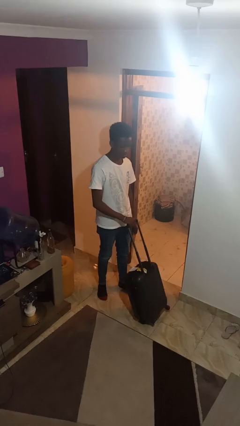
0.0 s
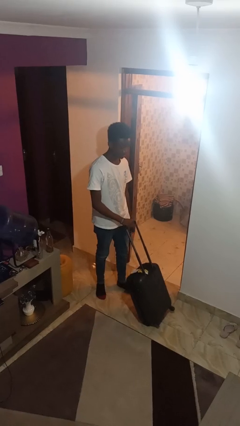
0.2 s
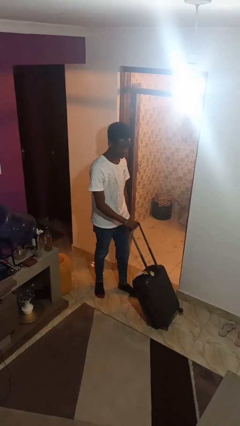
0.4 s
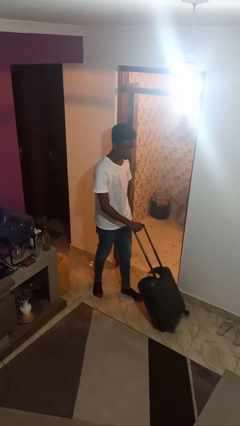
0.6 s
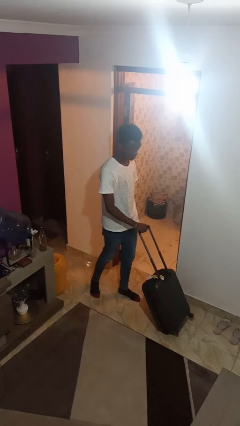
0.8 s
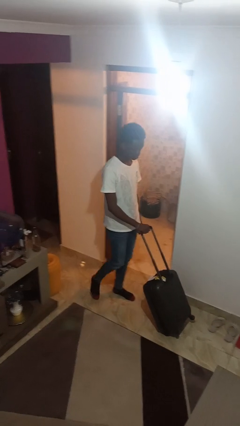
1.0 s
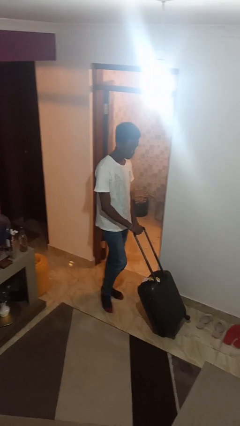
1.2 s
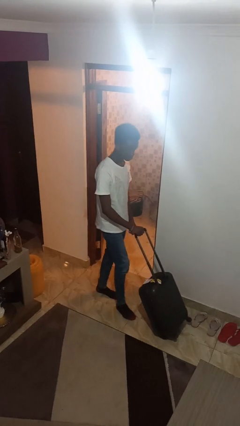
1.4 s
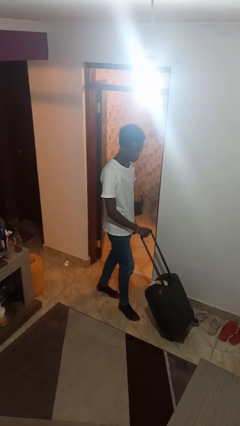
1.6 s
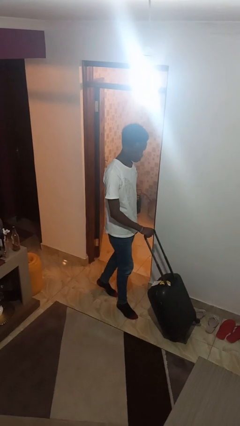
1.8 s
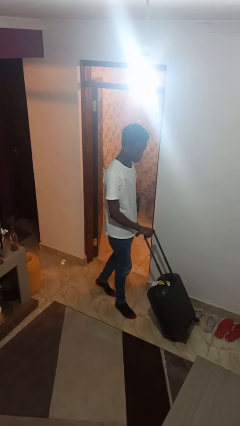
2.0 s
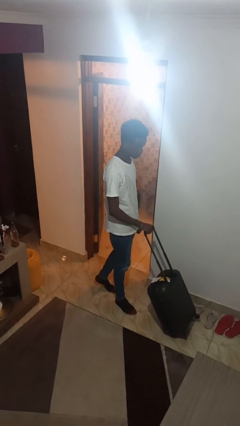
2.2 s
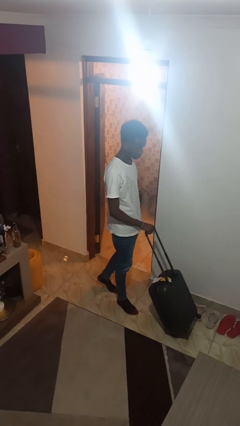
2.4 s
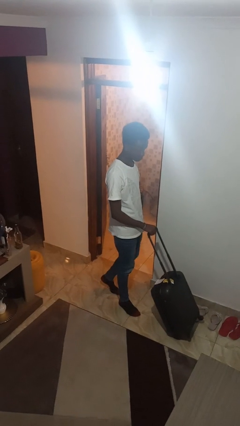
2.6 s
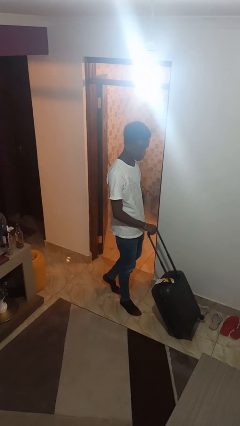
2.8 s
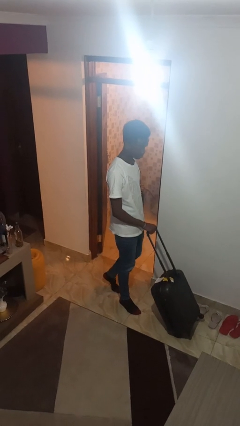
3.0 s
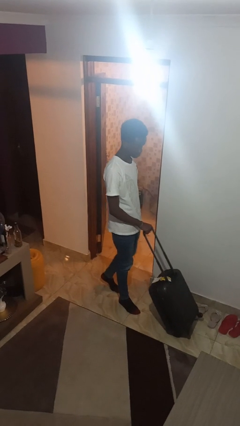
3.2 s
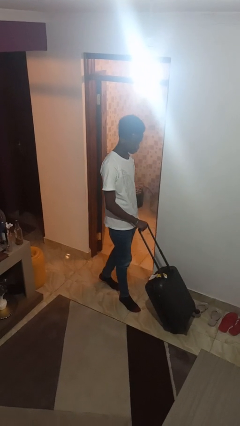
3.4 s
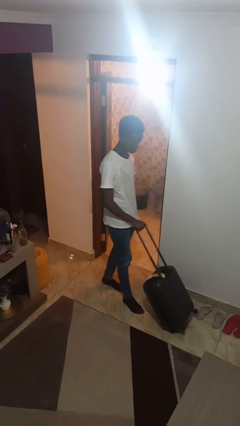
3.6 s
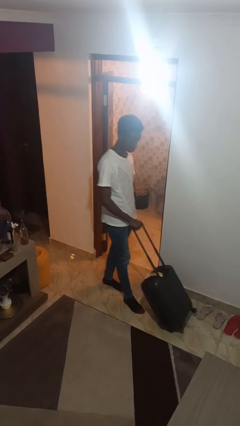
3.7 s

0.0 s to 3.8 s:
person pushes wheeled cart

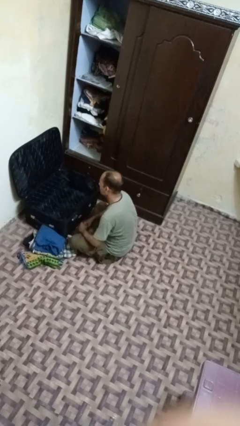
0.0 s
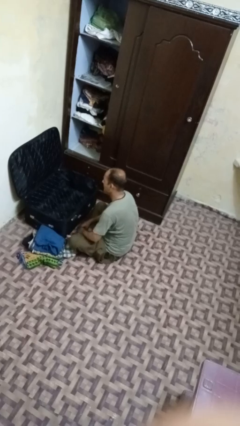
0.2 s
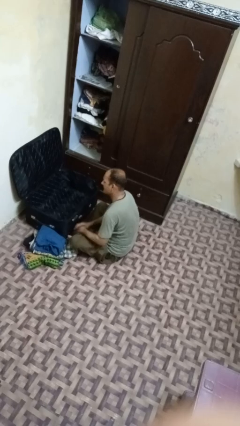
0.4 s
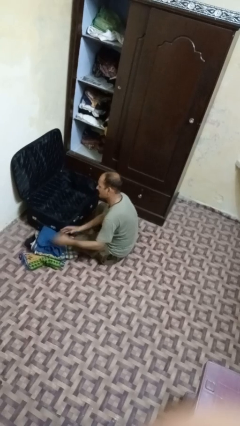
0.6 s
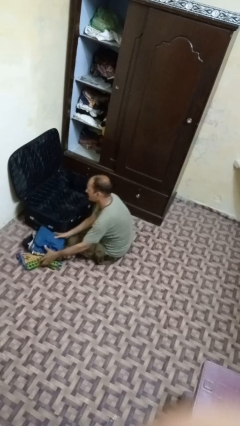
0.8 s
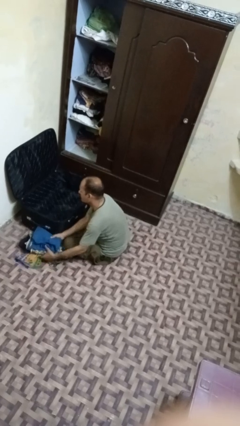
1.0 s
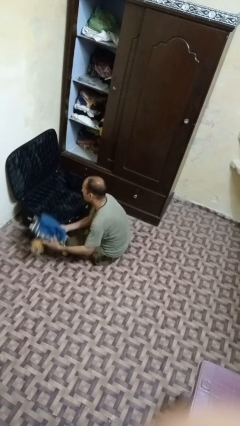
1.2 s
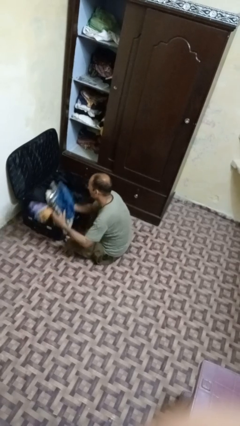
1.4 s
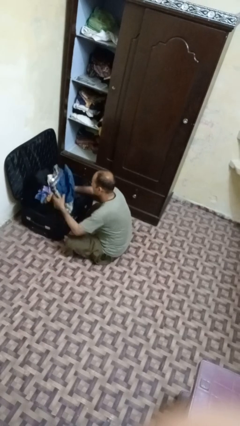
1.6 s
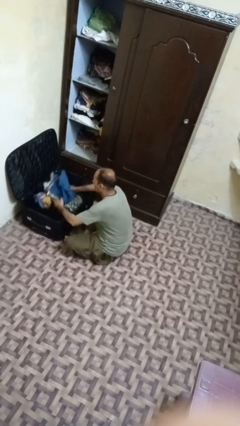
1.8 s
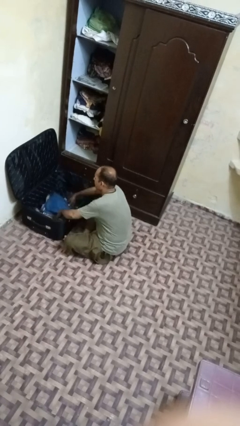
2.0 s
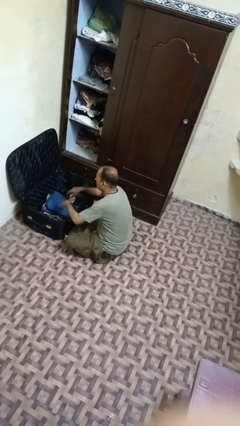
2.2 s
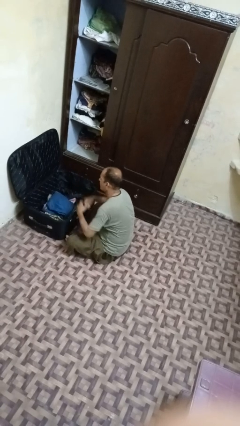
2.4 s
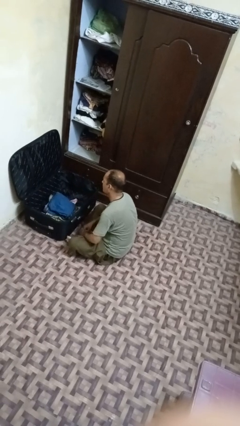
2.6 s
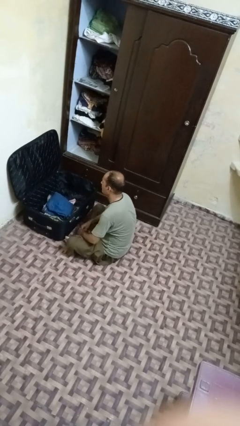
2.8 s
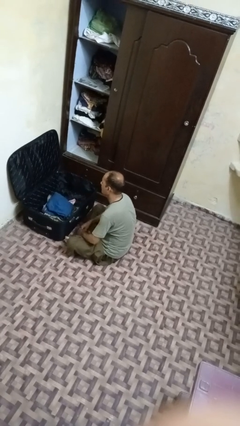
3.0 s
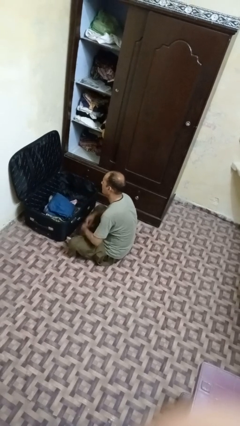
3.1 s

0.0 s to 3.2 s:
person loads clothes into suitcase

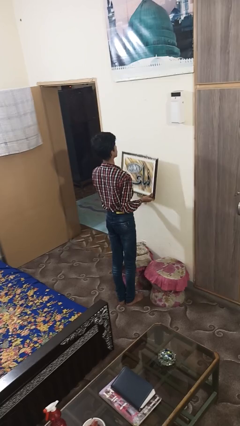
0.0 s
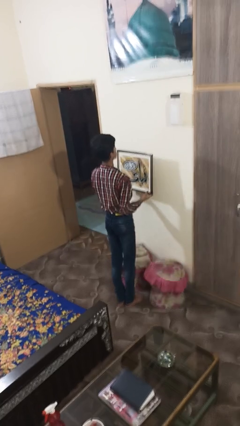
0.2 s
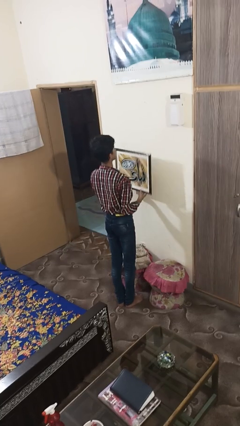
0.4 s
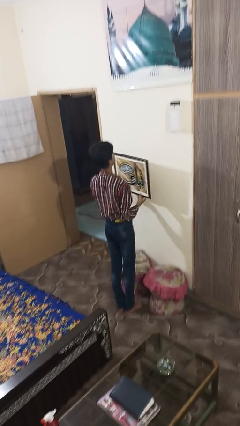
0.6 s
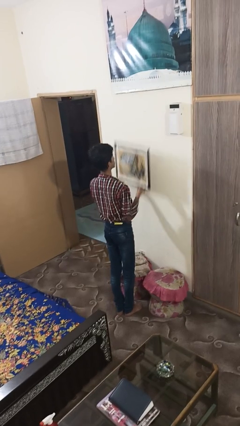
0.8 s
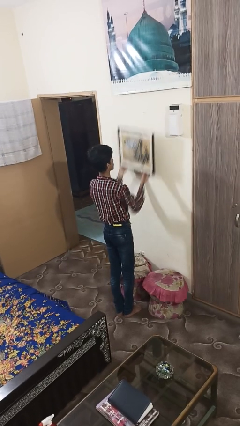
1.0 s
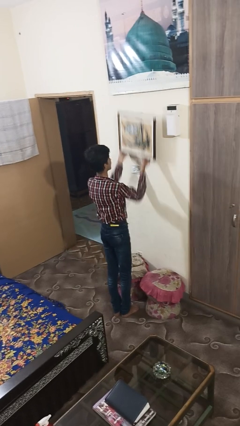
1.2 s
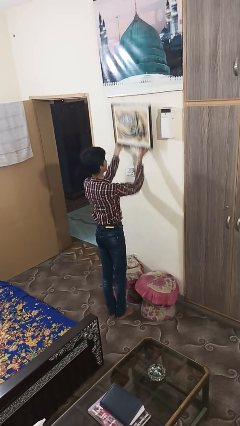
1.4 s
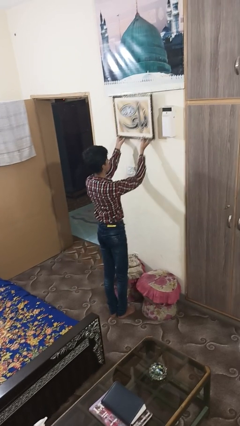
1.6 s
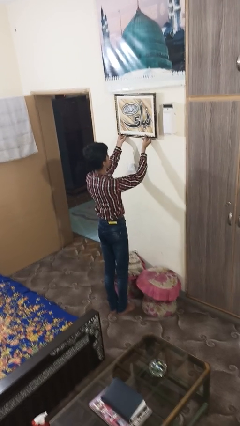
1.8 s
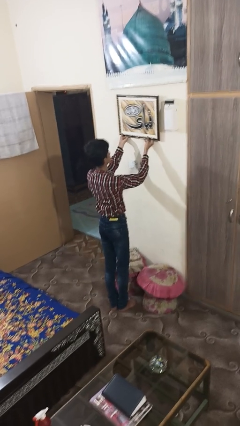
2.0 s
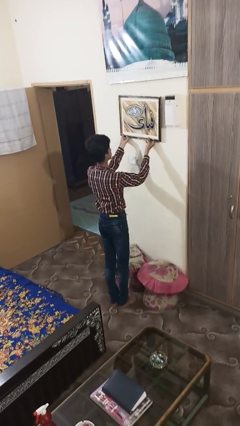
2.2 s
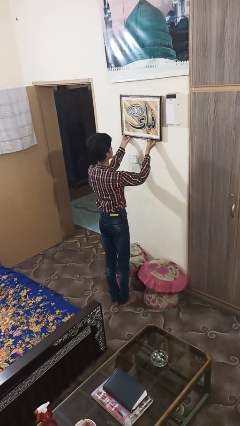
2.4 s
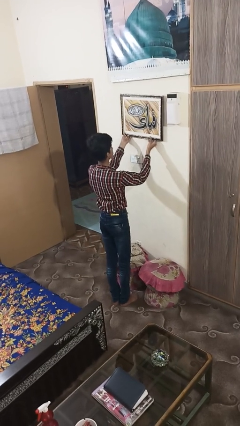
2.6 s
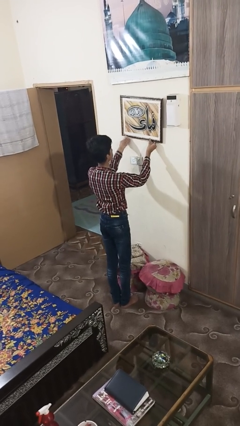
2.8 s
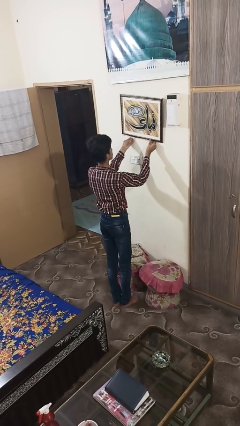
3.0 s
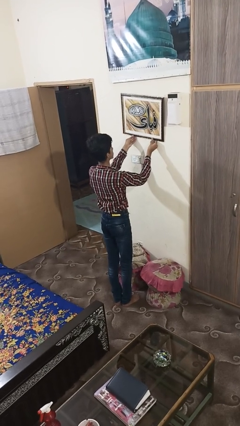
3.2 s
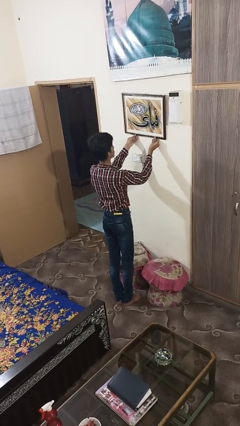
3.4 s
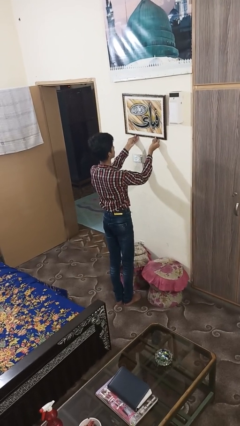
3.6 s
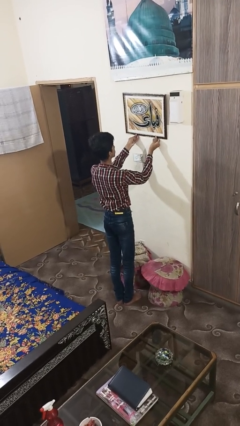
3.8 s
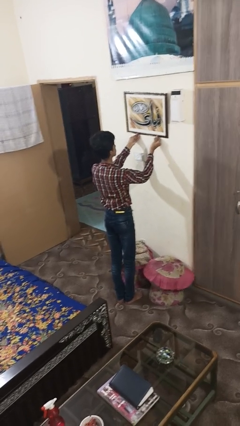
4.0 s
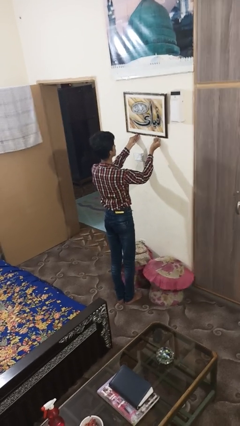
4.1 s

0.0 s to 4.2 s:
person puts up picture frame

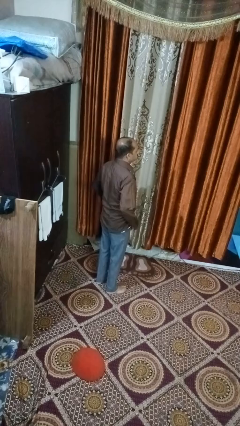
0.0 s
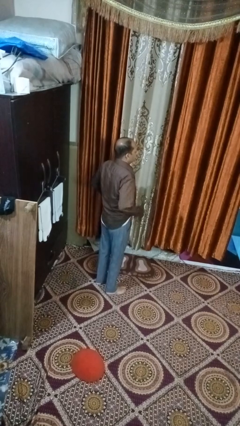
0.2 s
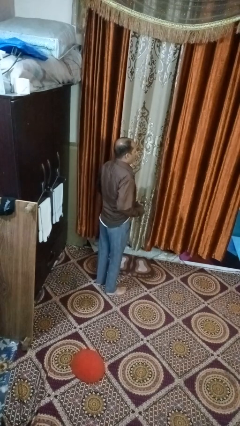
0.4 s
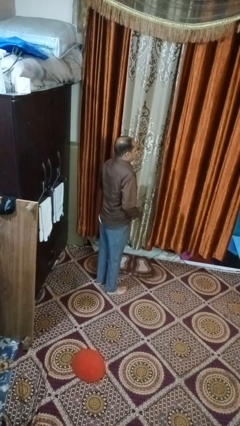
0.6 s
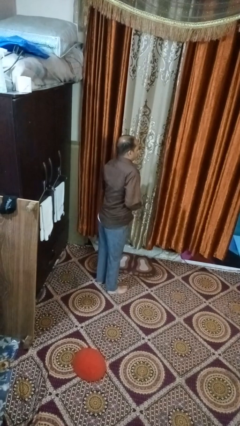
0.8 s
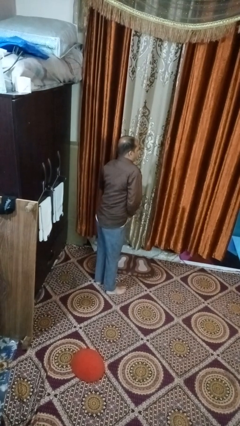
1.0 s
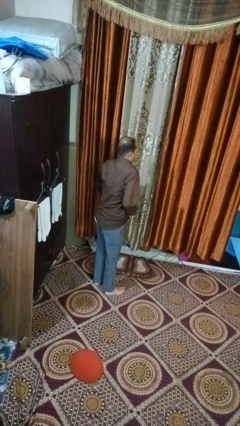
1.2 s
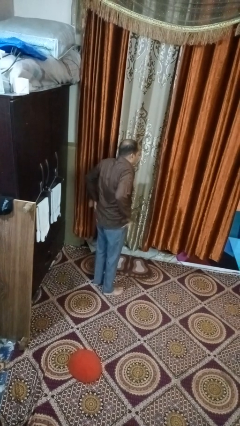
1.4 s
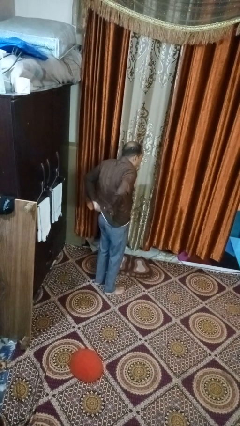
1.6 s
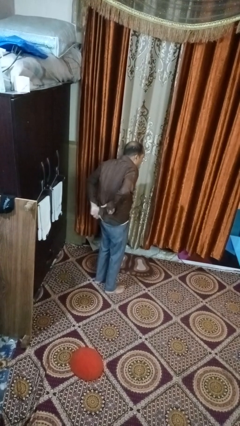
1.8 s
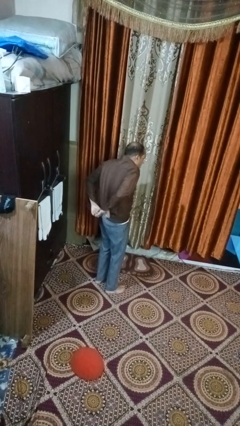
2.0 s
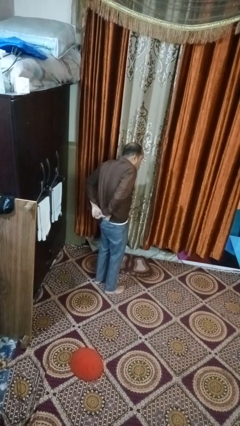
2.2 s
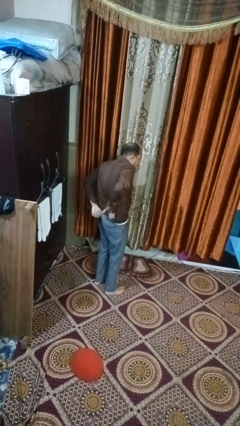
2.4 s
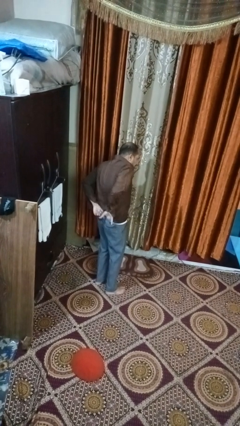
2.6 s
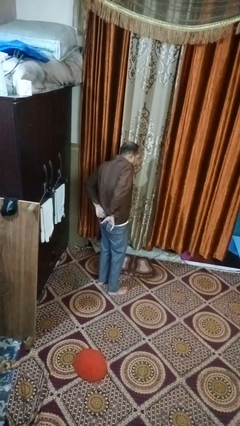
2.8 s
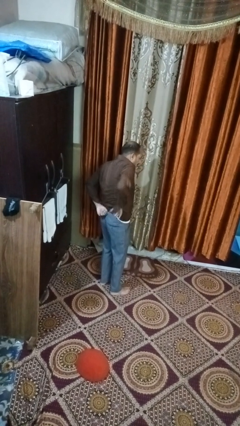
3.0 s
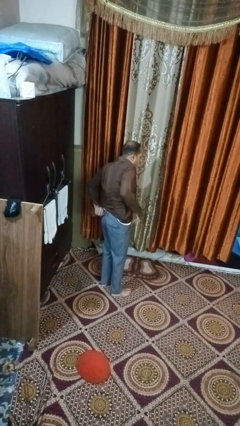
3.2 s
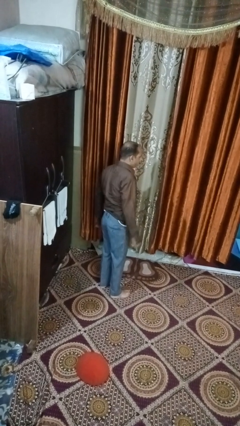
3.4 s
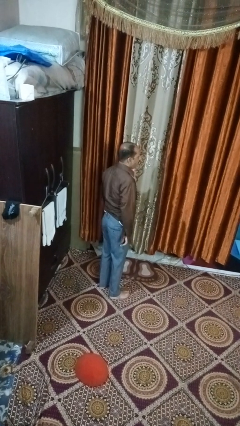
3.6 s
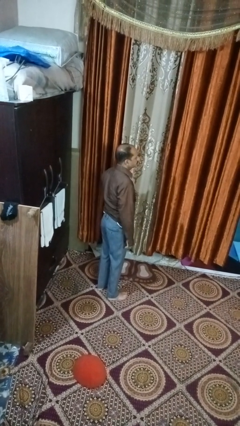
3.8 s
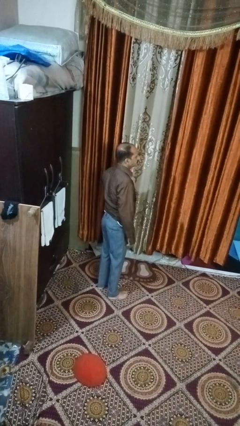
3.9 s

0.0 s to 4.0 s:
person tucks in shirt

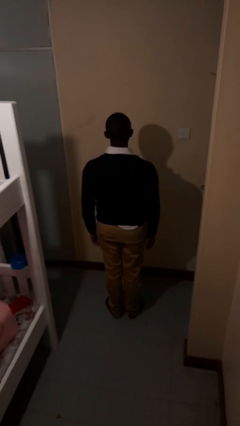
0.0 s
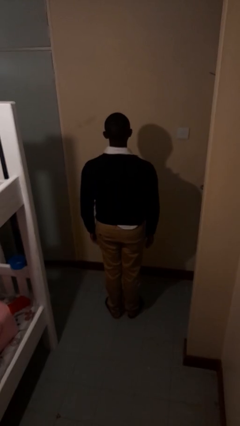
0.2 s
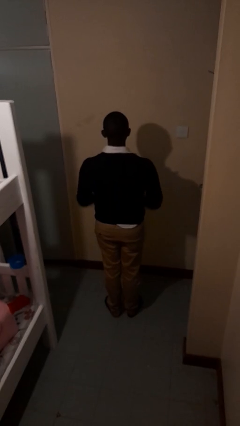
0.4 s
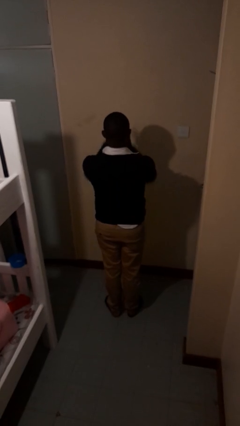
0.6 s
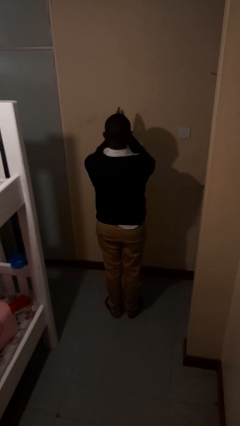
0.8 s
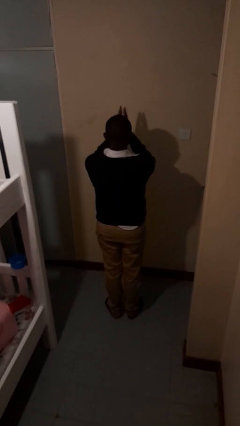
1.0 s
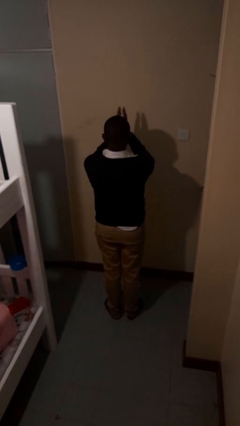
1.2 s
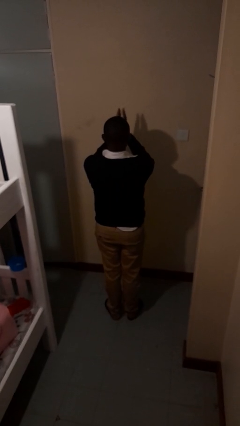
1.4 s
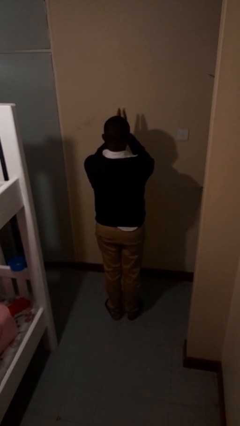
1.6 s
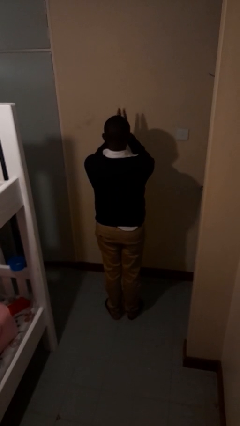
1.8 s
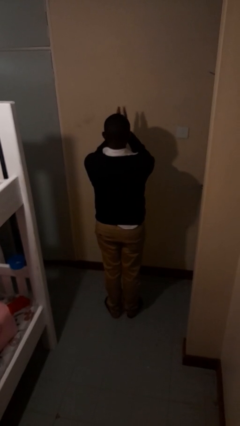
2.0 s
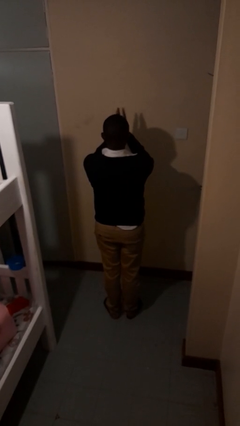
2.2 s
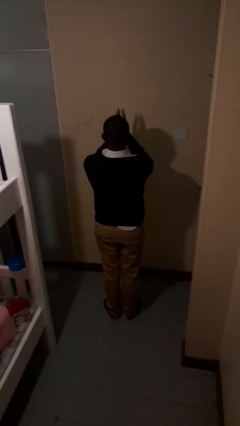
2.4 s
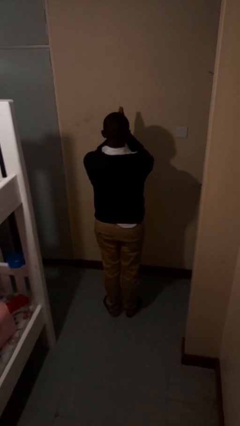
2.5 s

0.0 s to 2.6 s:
person claps hands
